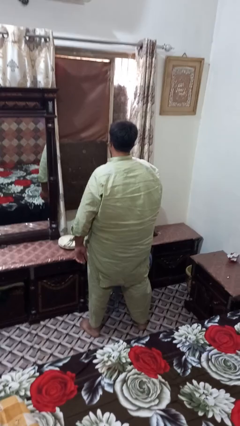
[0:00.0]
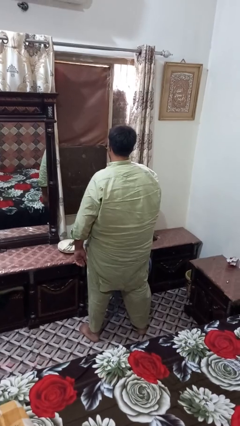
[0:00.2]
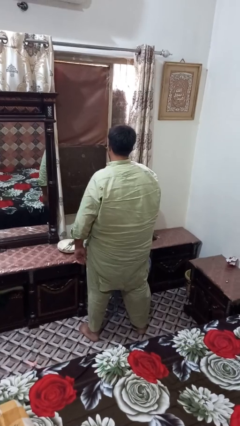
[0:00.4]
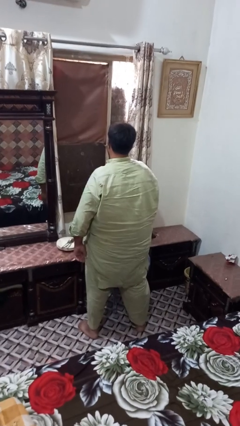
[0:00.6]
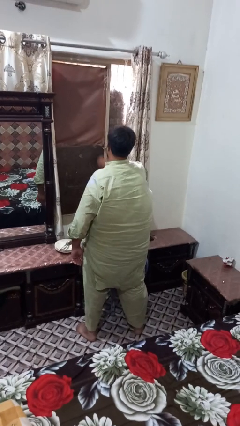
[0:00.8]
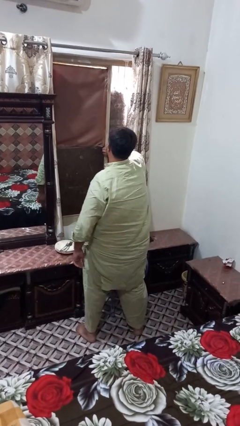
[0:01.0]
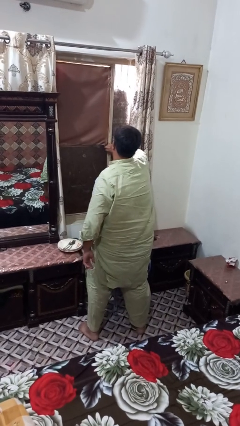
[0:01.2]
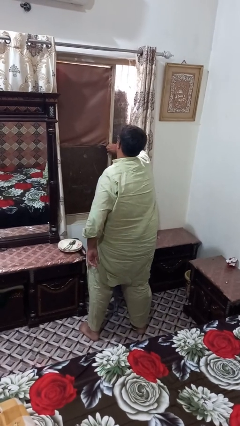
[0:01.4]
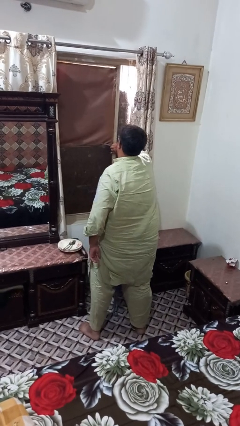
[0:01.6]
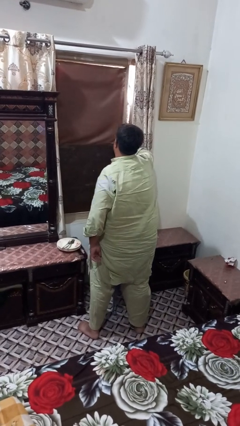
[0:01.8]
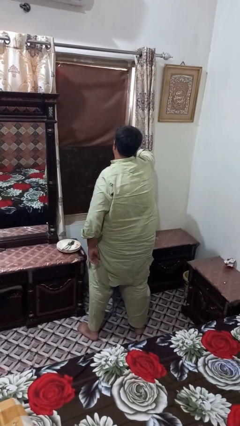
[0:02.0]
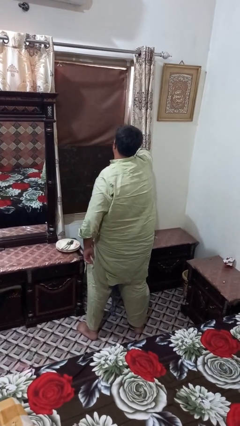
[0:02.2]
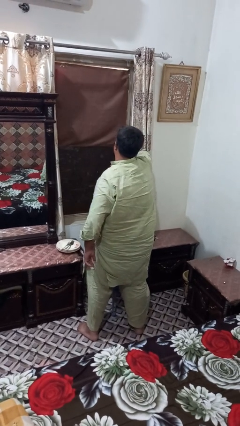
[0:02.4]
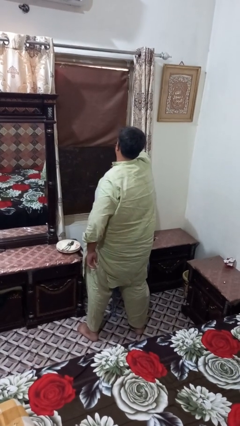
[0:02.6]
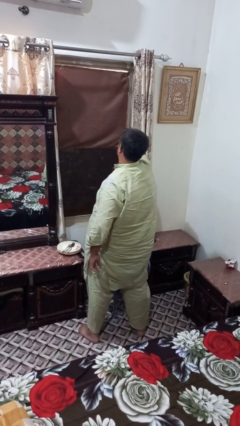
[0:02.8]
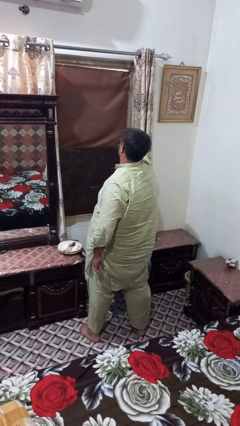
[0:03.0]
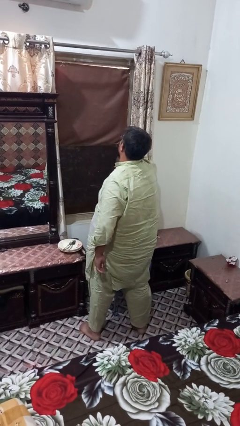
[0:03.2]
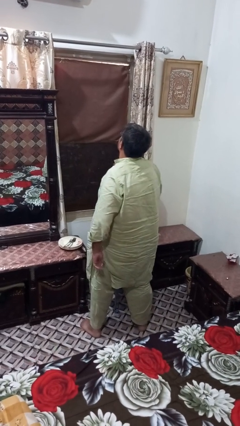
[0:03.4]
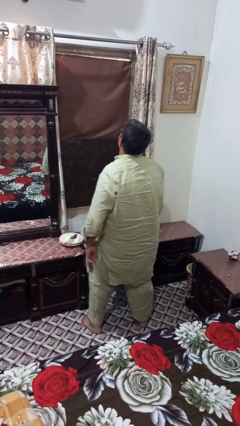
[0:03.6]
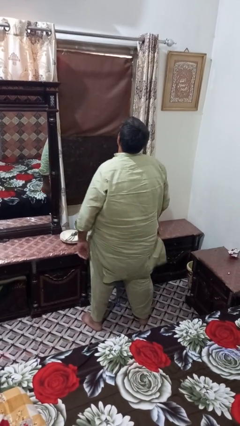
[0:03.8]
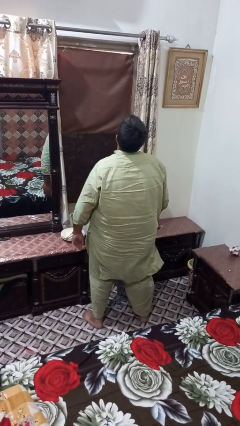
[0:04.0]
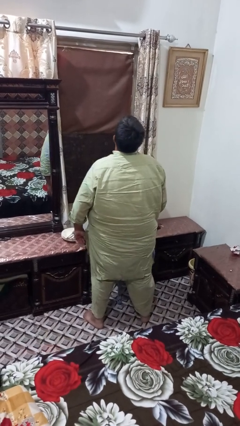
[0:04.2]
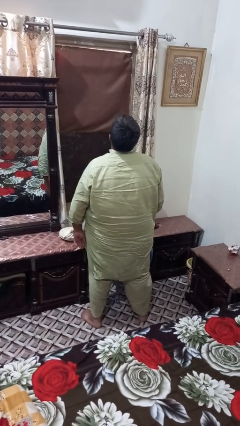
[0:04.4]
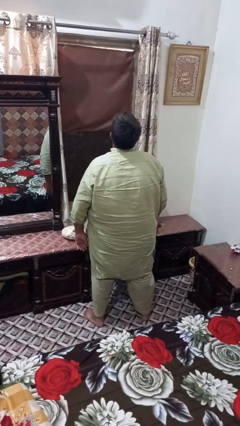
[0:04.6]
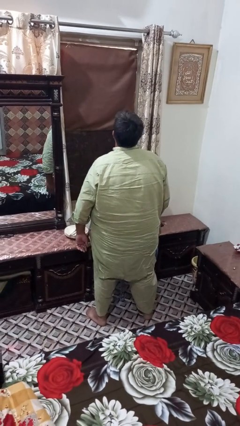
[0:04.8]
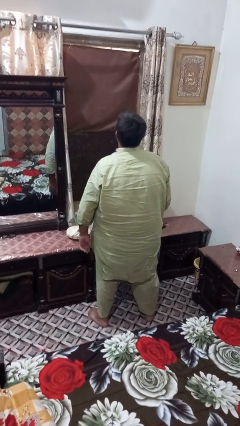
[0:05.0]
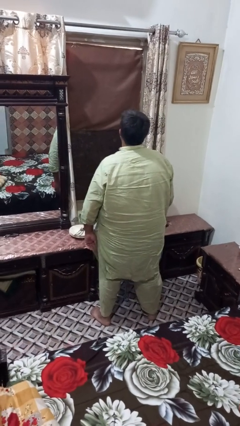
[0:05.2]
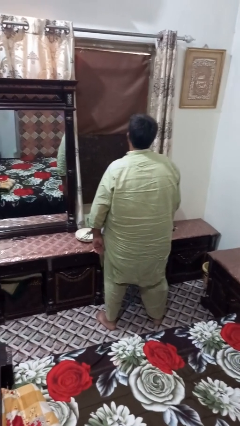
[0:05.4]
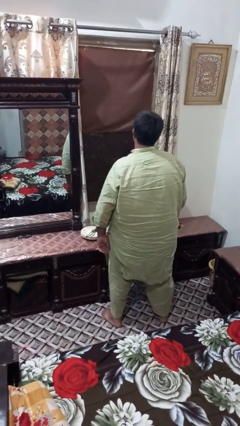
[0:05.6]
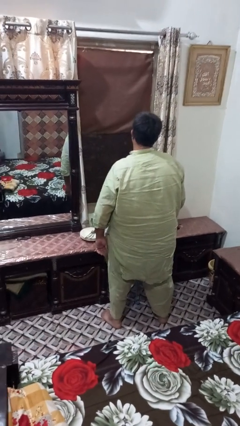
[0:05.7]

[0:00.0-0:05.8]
person closes sliding door

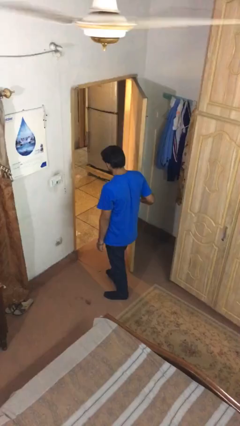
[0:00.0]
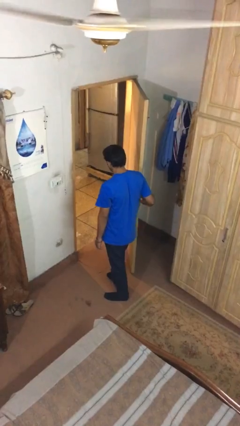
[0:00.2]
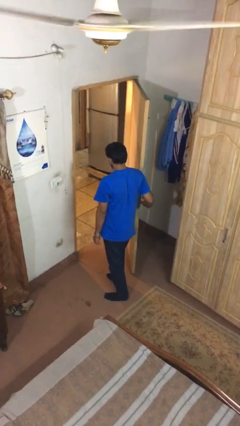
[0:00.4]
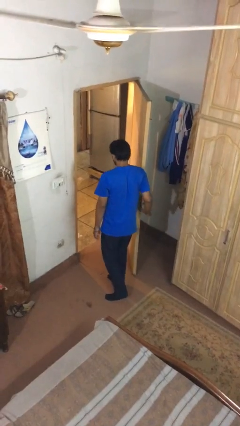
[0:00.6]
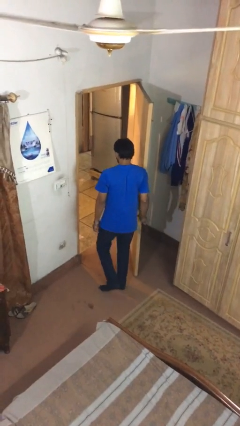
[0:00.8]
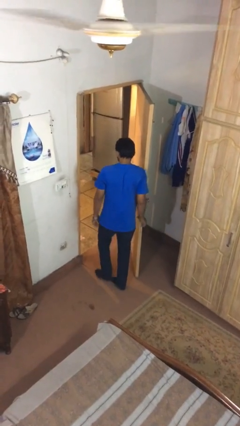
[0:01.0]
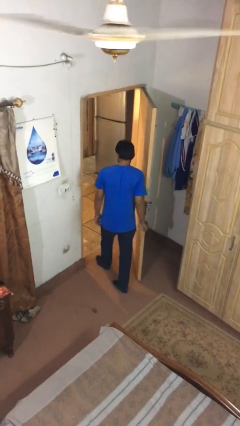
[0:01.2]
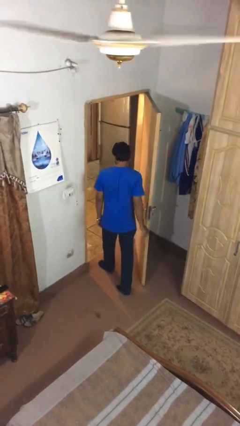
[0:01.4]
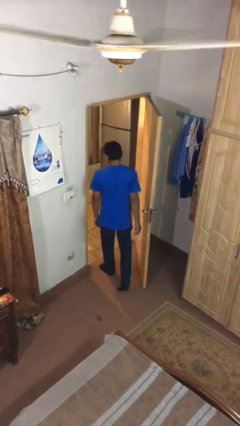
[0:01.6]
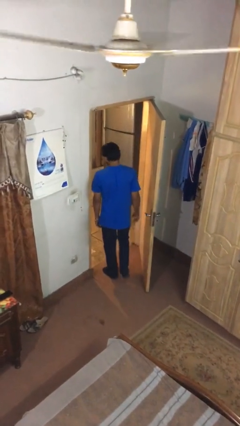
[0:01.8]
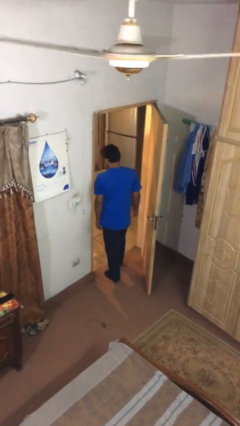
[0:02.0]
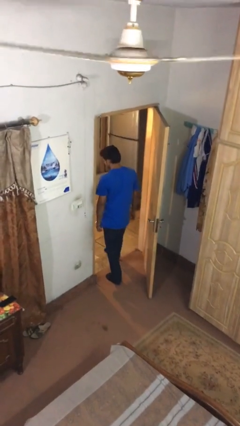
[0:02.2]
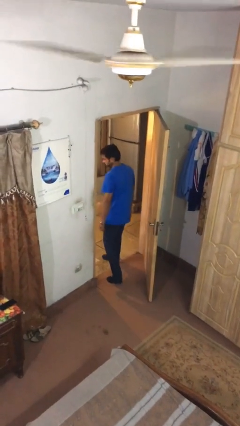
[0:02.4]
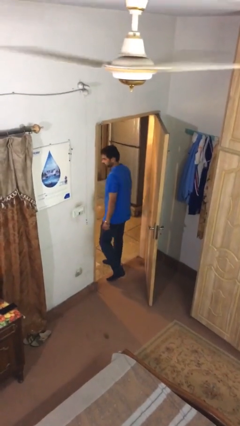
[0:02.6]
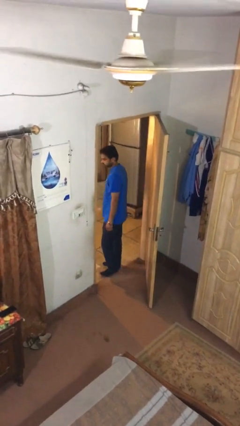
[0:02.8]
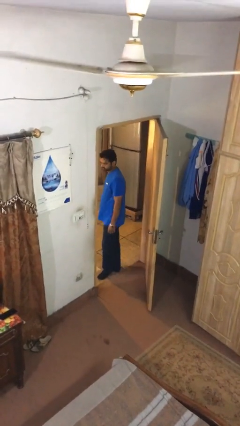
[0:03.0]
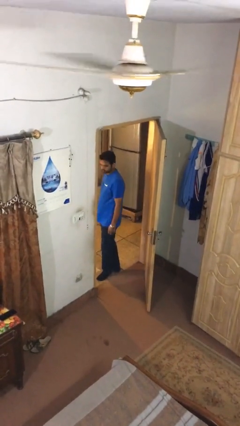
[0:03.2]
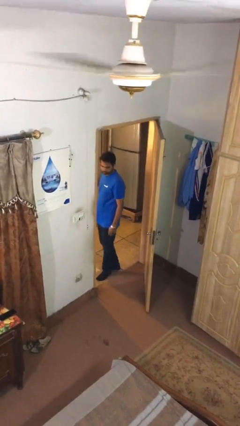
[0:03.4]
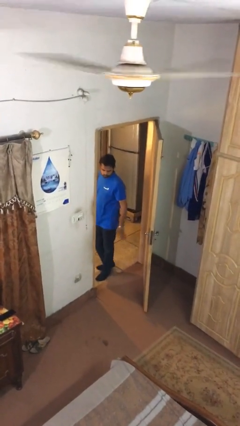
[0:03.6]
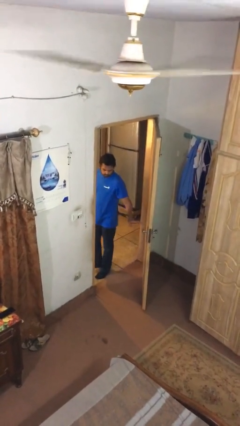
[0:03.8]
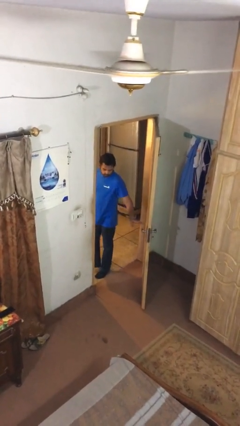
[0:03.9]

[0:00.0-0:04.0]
person exits scene through structure

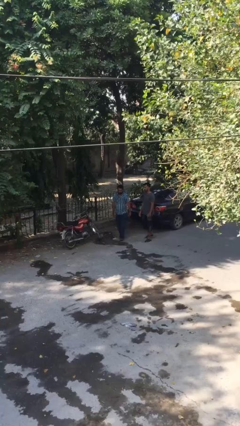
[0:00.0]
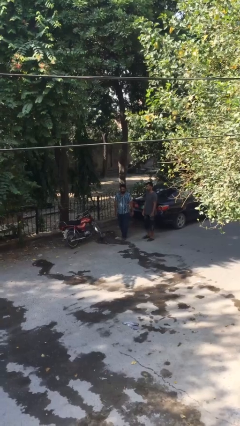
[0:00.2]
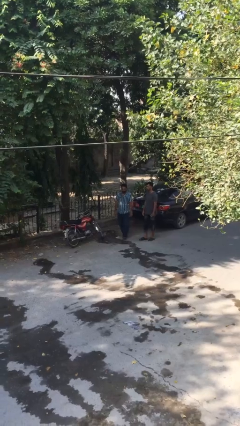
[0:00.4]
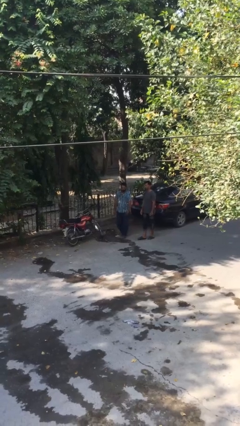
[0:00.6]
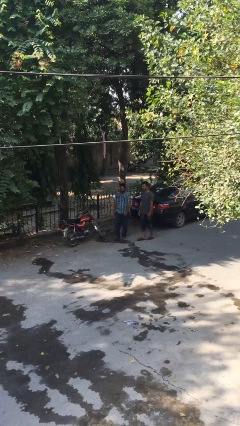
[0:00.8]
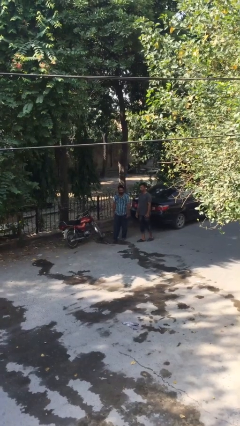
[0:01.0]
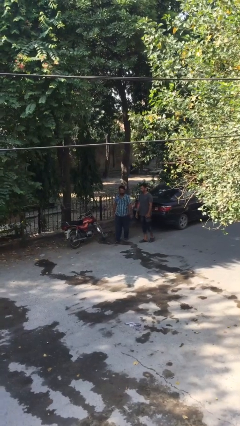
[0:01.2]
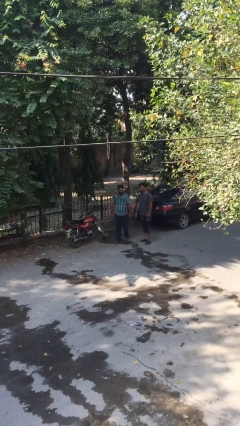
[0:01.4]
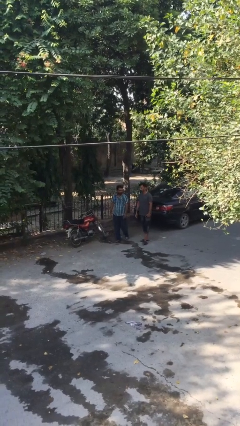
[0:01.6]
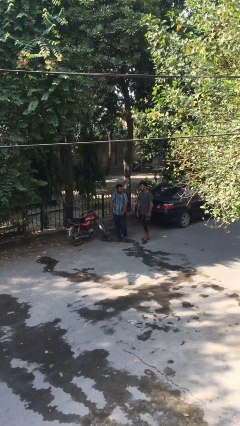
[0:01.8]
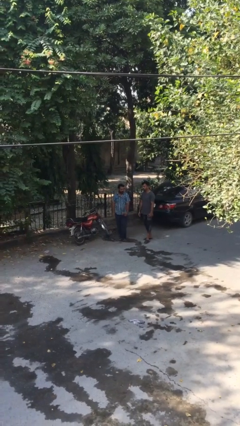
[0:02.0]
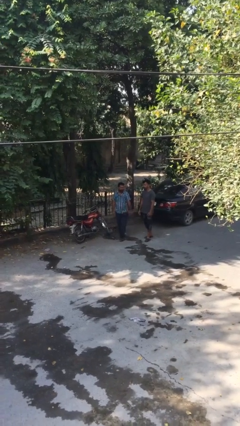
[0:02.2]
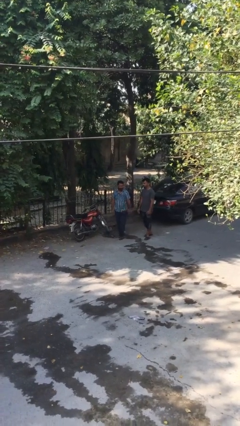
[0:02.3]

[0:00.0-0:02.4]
person talks to person

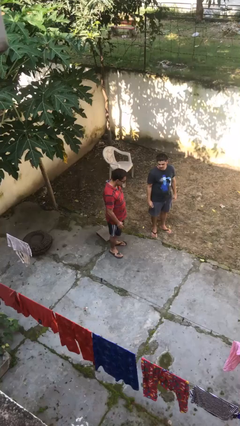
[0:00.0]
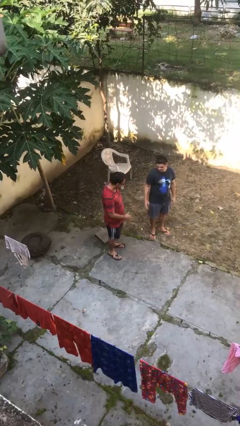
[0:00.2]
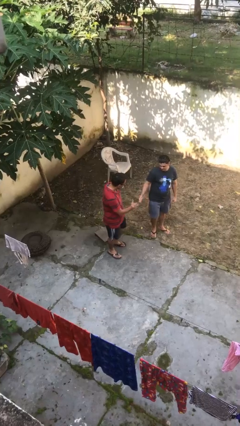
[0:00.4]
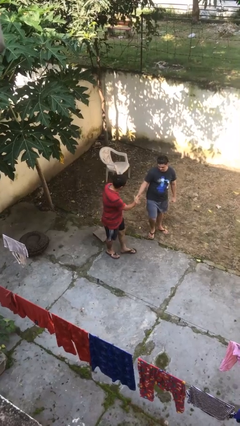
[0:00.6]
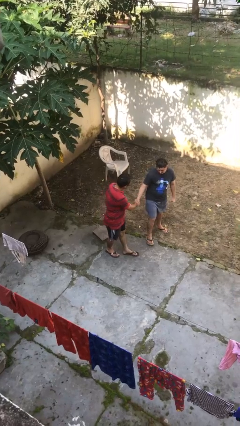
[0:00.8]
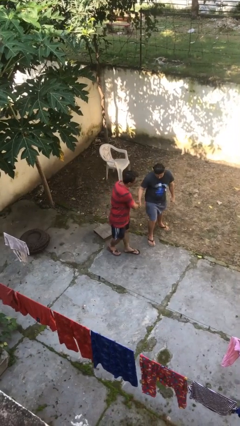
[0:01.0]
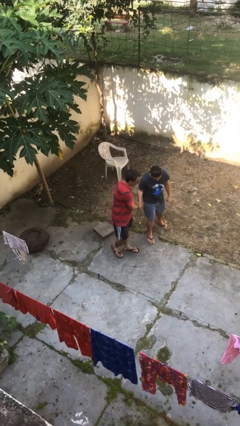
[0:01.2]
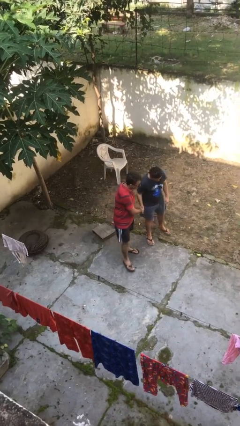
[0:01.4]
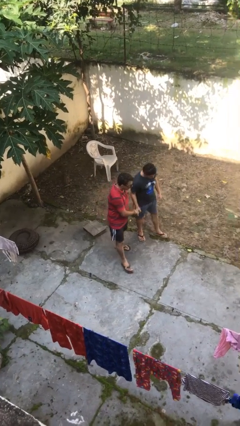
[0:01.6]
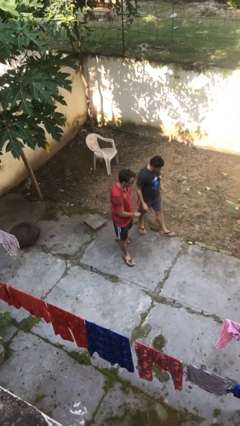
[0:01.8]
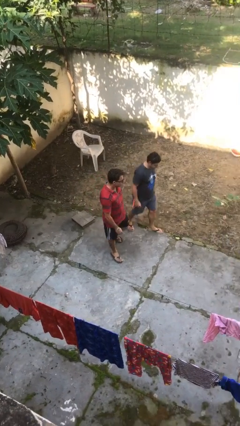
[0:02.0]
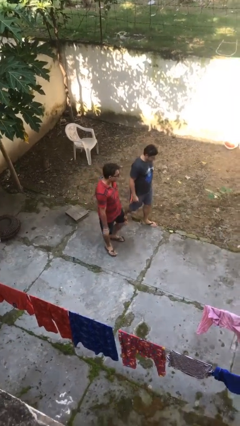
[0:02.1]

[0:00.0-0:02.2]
person shakes hand

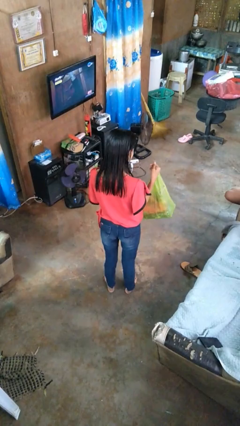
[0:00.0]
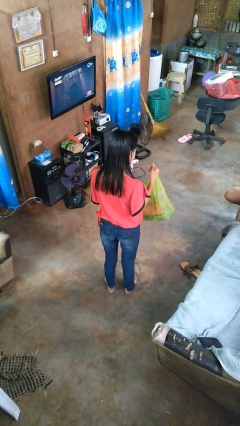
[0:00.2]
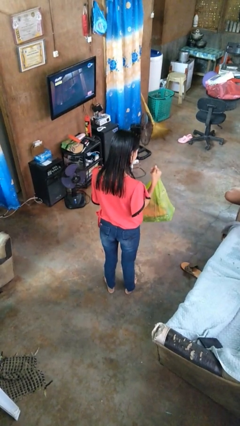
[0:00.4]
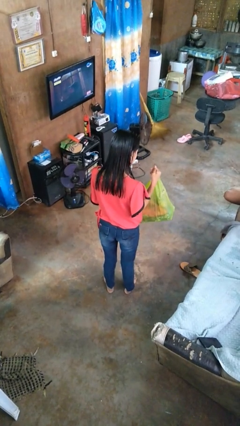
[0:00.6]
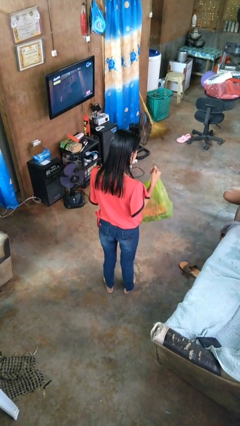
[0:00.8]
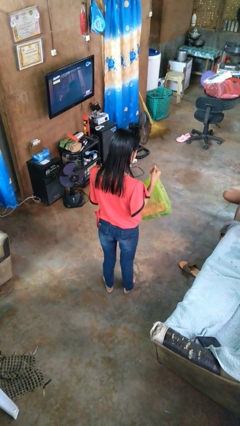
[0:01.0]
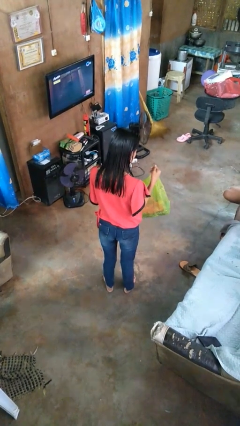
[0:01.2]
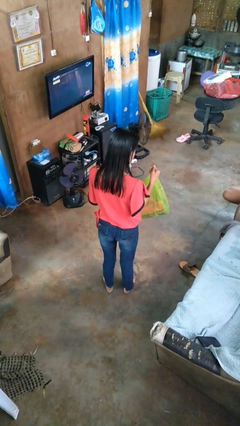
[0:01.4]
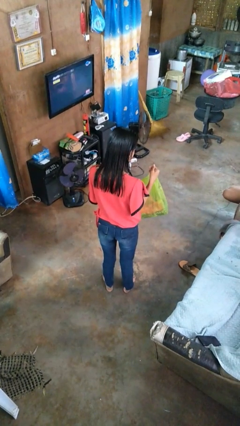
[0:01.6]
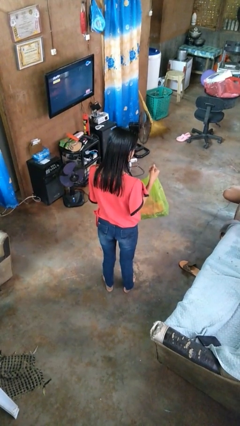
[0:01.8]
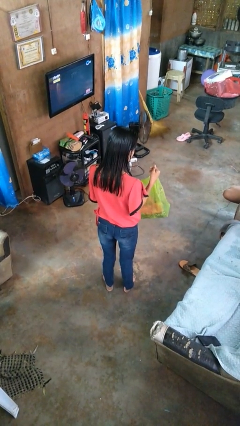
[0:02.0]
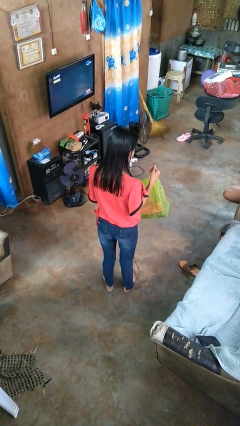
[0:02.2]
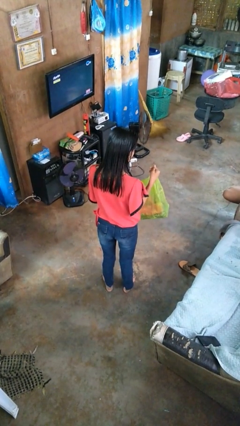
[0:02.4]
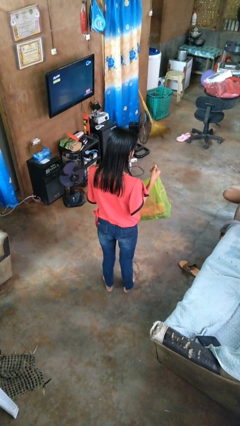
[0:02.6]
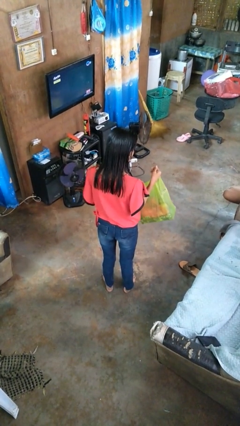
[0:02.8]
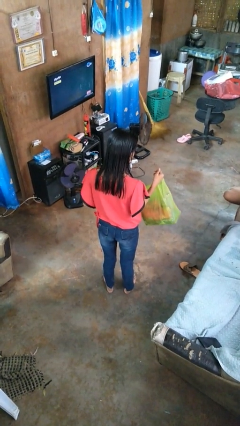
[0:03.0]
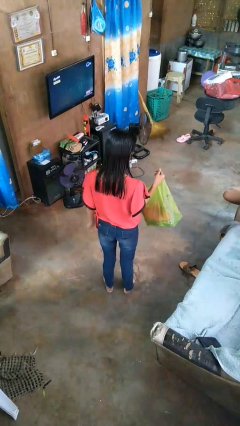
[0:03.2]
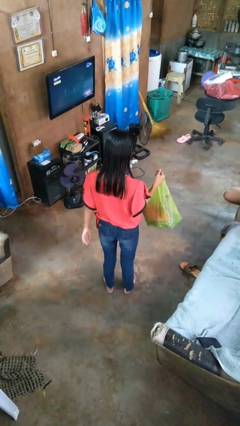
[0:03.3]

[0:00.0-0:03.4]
person searches in bag

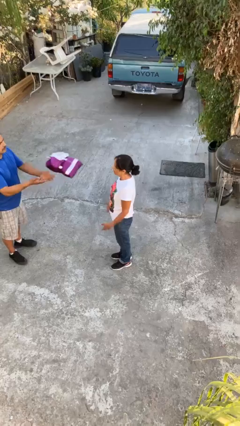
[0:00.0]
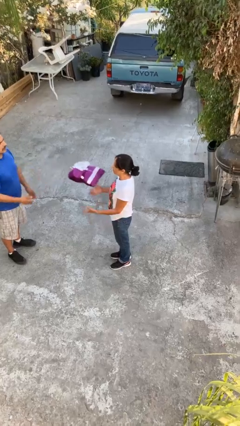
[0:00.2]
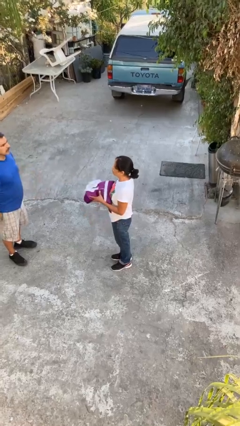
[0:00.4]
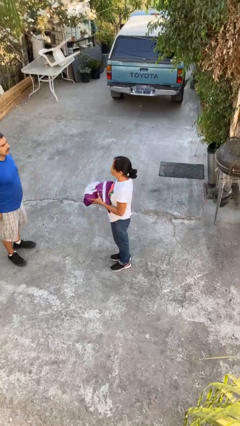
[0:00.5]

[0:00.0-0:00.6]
person catches object from person
